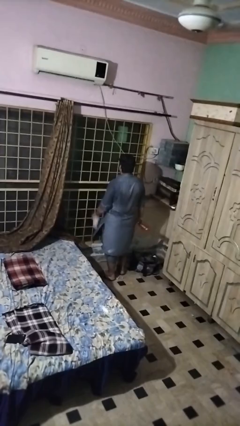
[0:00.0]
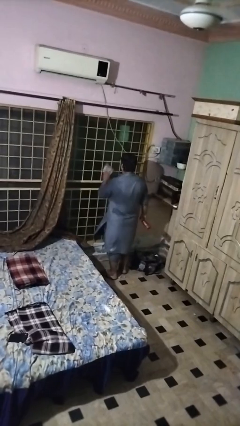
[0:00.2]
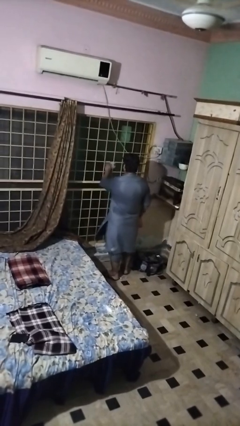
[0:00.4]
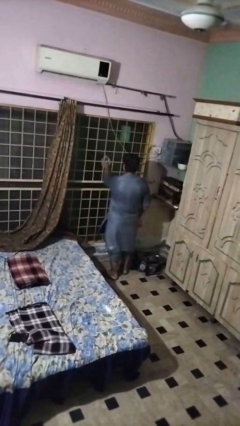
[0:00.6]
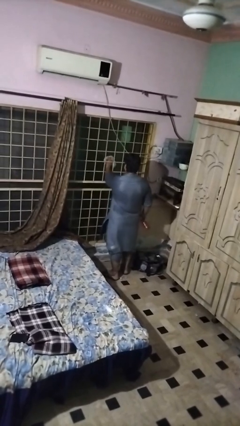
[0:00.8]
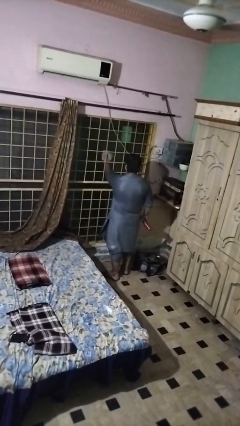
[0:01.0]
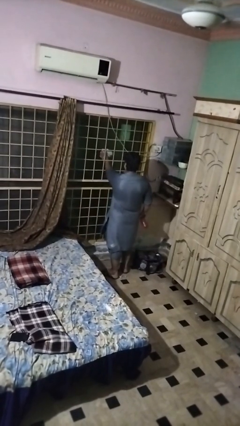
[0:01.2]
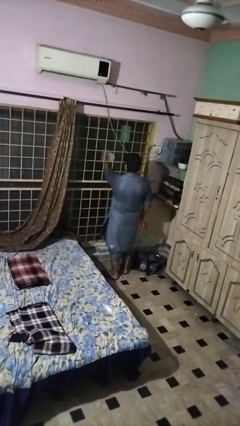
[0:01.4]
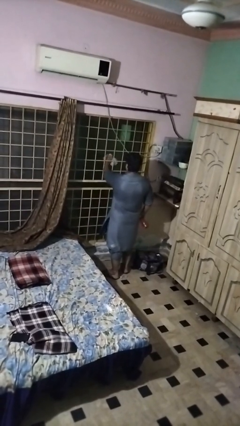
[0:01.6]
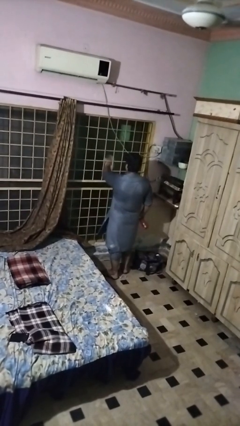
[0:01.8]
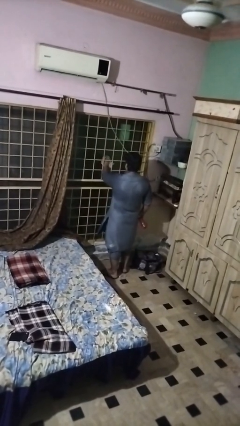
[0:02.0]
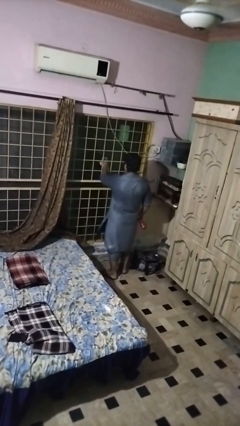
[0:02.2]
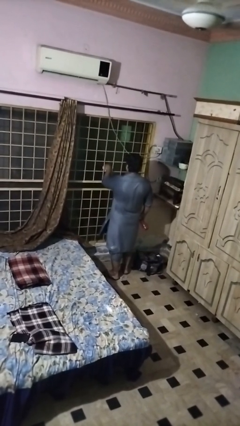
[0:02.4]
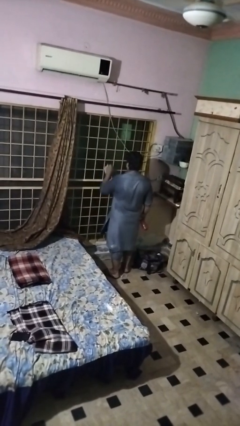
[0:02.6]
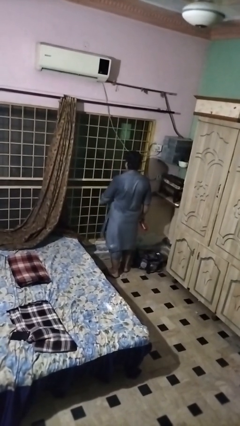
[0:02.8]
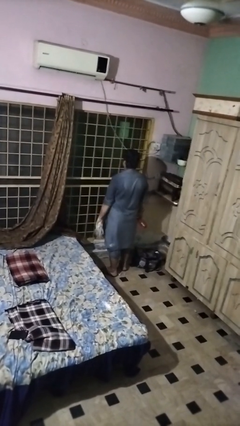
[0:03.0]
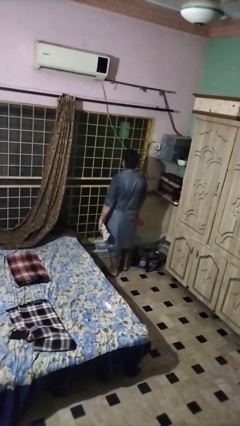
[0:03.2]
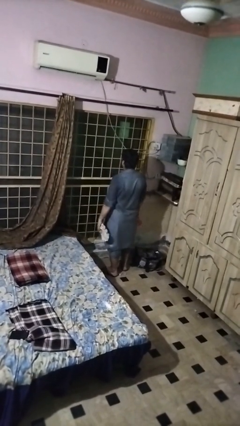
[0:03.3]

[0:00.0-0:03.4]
person washes window

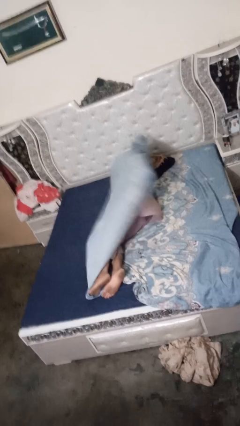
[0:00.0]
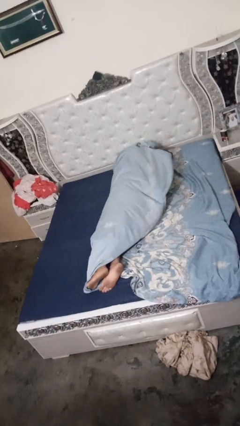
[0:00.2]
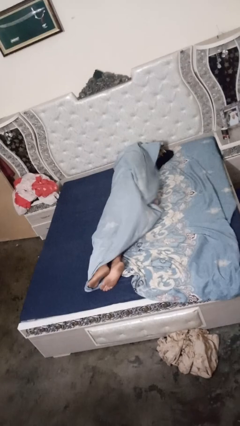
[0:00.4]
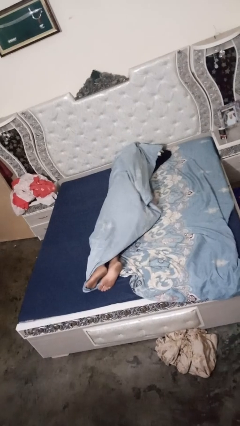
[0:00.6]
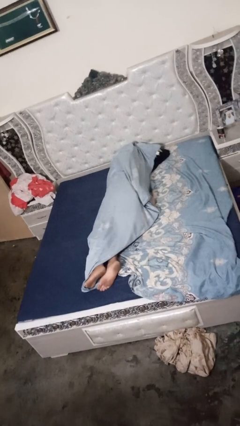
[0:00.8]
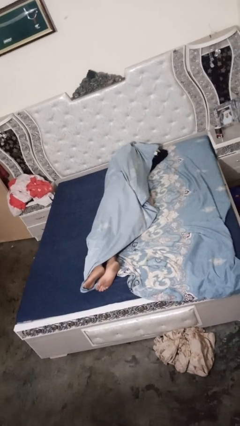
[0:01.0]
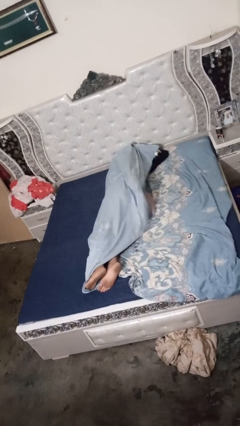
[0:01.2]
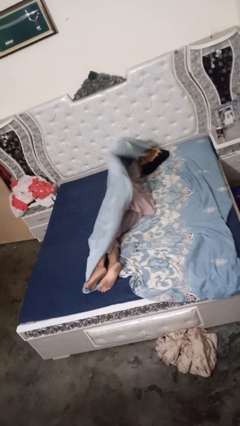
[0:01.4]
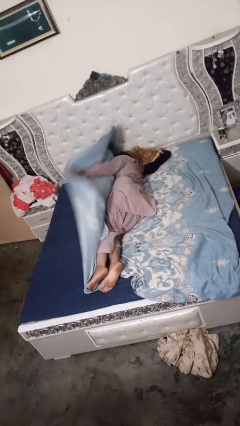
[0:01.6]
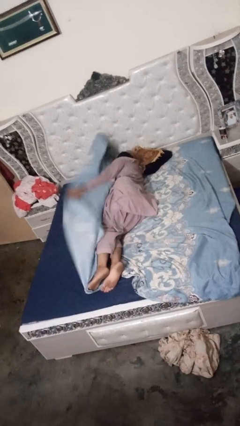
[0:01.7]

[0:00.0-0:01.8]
person covers with bedsheets

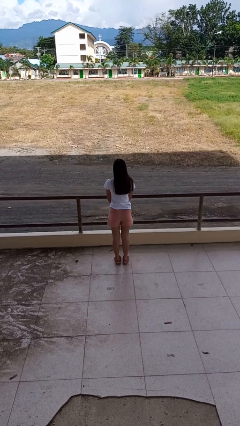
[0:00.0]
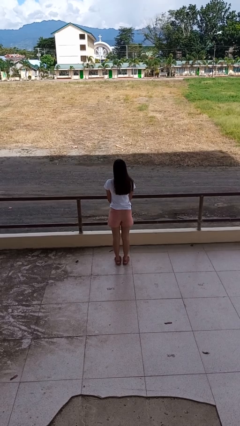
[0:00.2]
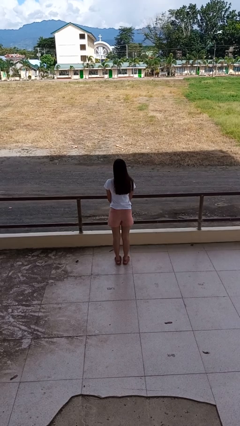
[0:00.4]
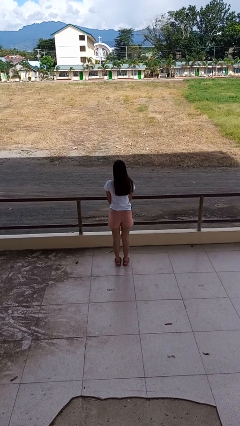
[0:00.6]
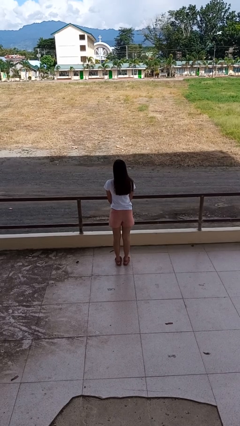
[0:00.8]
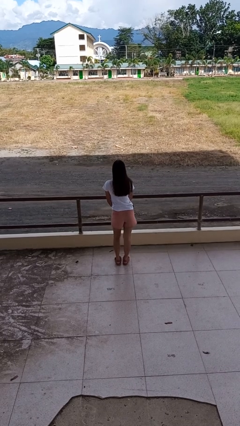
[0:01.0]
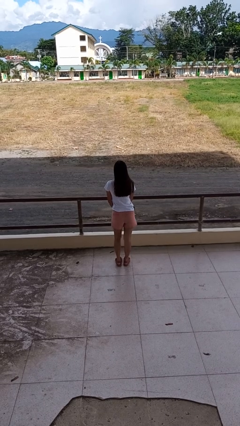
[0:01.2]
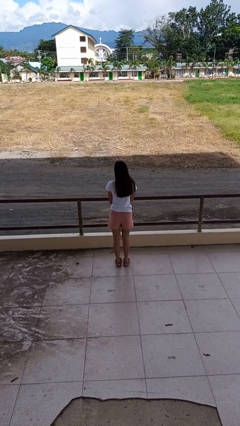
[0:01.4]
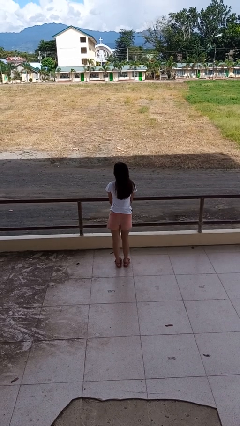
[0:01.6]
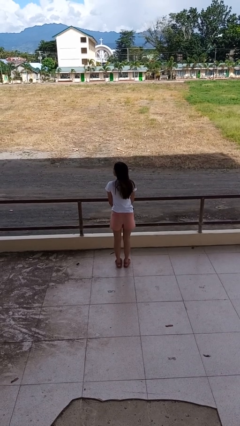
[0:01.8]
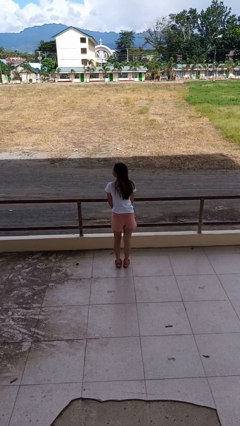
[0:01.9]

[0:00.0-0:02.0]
person wiggles hips

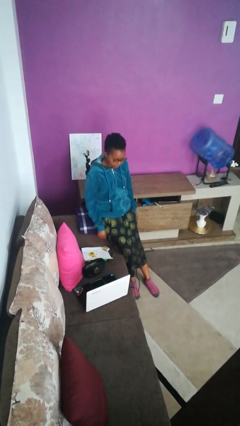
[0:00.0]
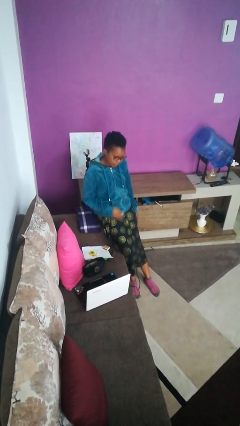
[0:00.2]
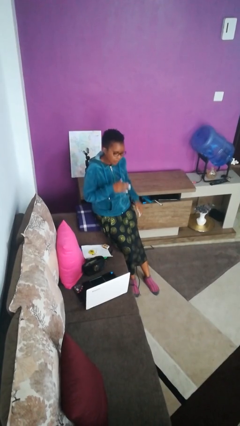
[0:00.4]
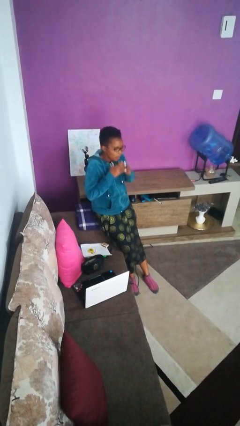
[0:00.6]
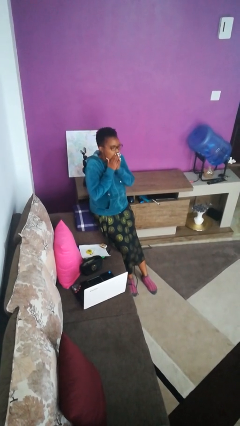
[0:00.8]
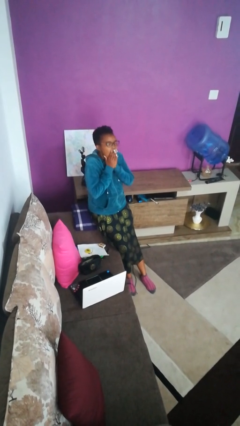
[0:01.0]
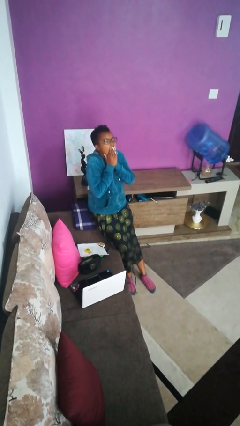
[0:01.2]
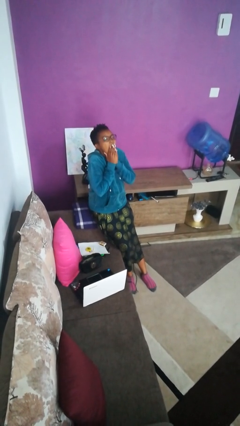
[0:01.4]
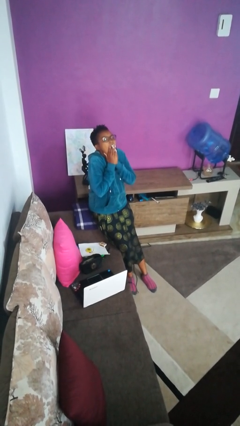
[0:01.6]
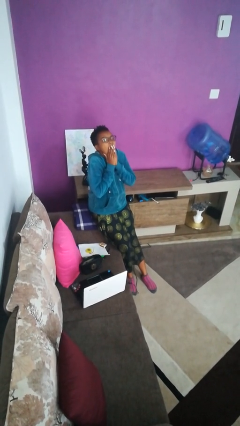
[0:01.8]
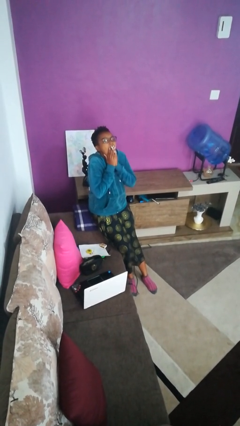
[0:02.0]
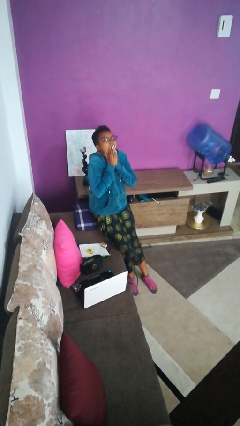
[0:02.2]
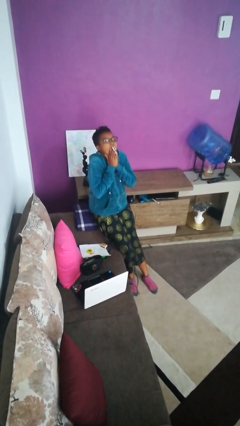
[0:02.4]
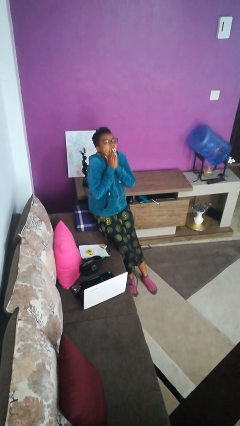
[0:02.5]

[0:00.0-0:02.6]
person yawns

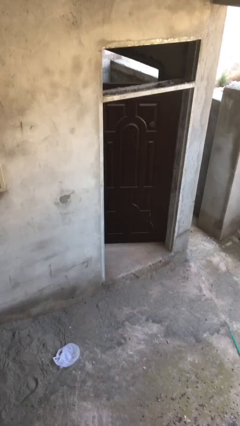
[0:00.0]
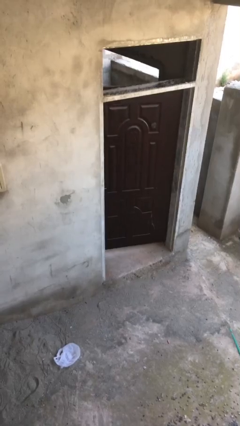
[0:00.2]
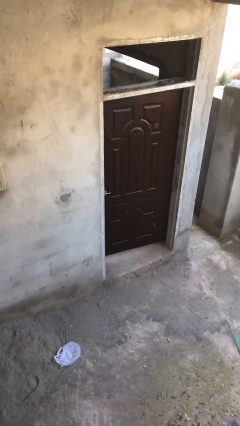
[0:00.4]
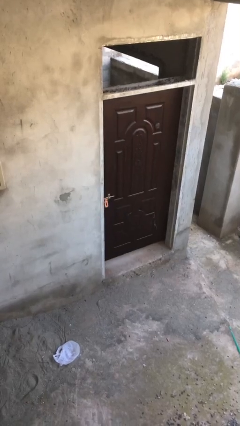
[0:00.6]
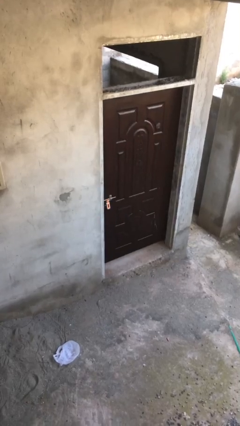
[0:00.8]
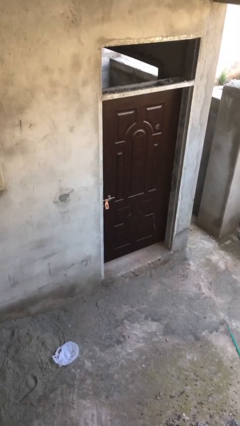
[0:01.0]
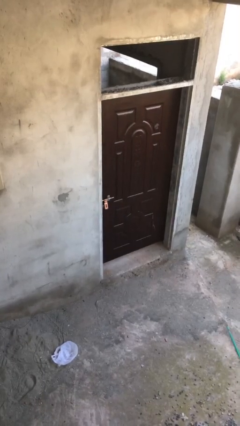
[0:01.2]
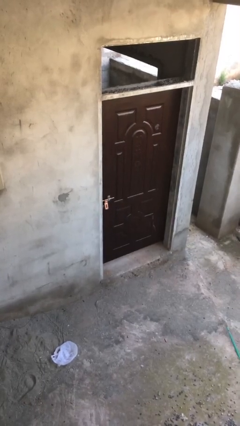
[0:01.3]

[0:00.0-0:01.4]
person closes facility door

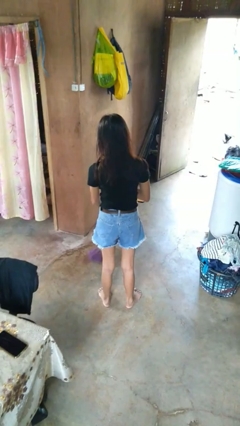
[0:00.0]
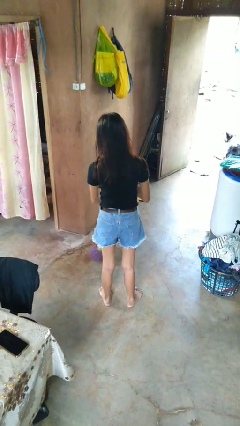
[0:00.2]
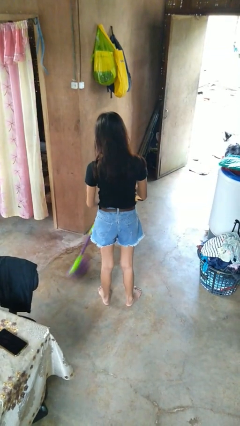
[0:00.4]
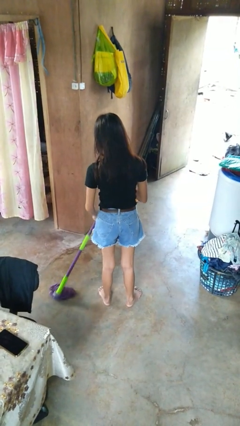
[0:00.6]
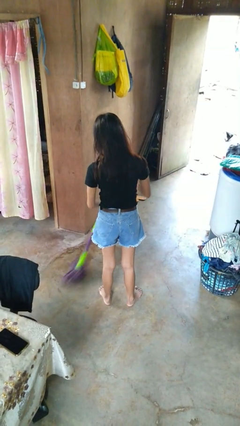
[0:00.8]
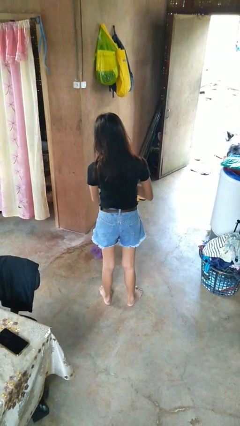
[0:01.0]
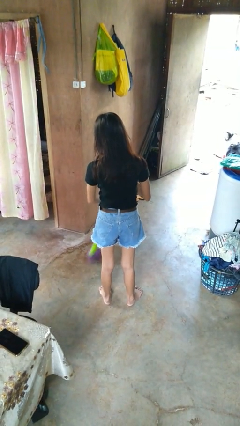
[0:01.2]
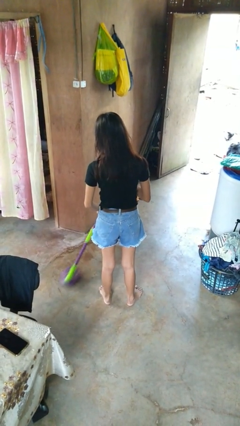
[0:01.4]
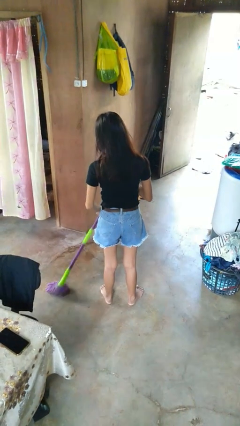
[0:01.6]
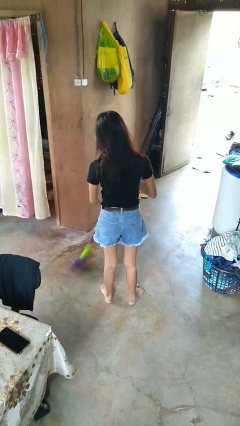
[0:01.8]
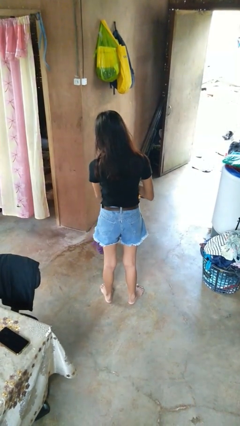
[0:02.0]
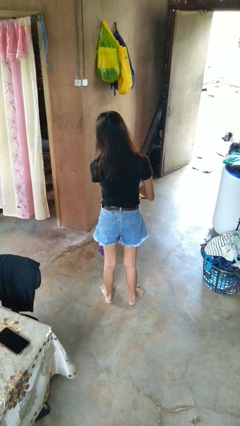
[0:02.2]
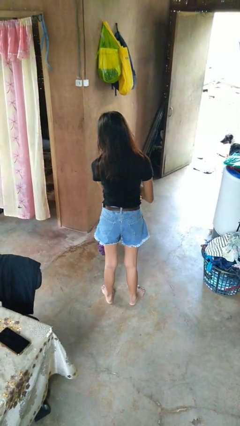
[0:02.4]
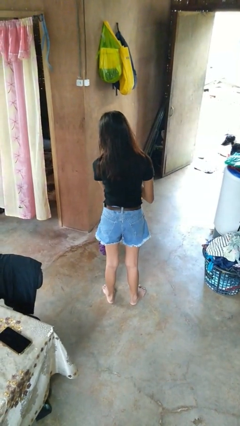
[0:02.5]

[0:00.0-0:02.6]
person mops

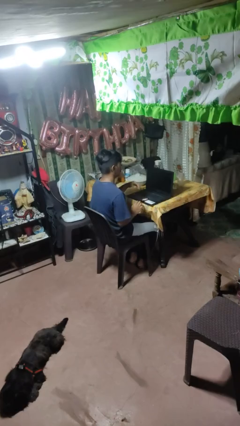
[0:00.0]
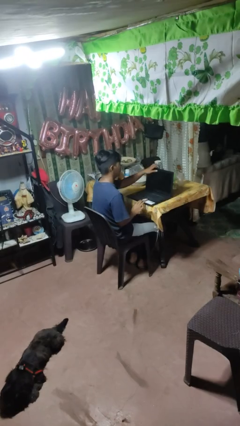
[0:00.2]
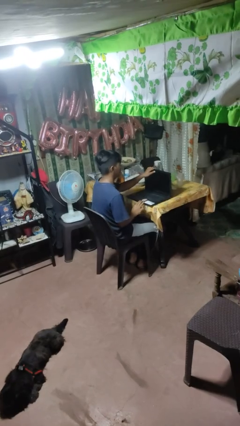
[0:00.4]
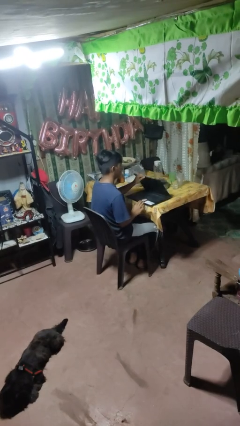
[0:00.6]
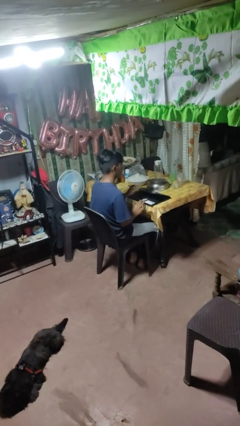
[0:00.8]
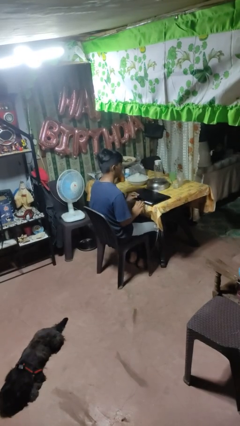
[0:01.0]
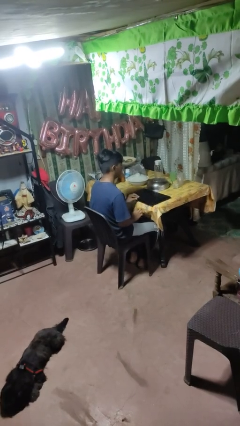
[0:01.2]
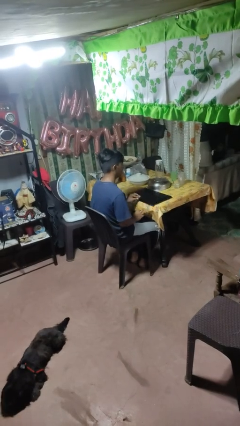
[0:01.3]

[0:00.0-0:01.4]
person closes laptop

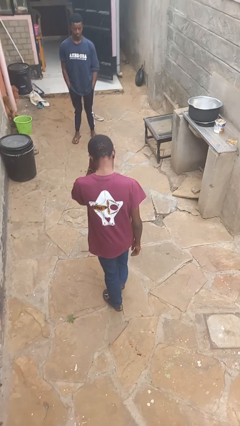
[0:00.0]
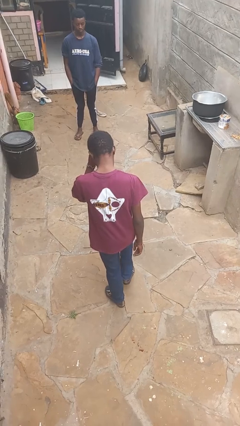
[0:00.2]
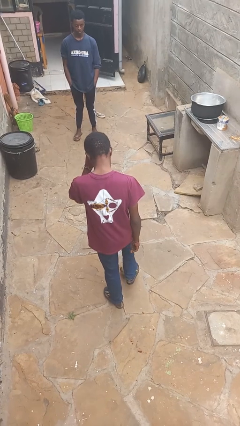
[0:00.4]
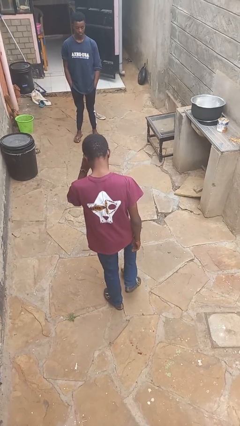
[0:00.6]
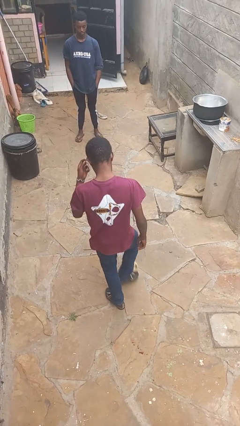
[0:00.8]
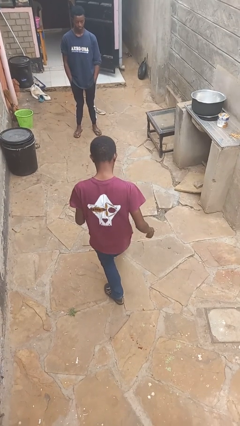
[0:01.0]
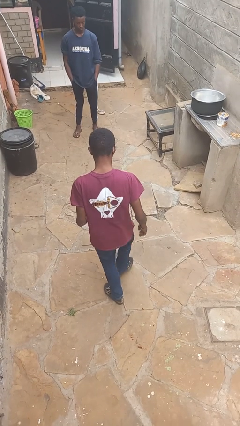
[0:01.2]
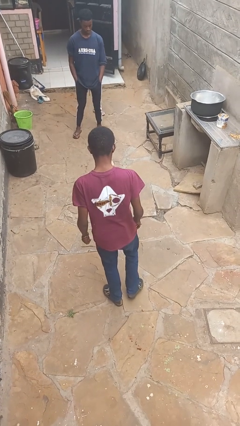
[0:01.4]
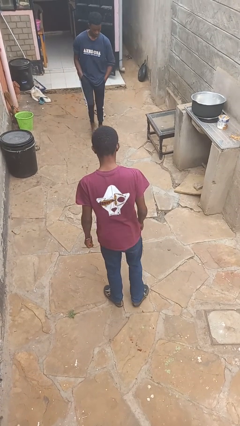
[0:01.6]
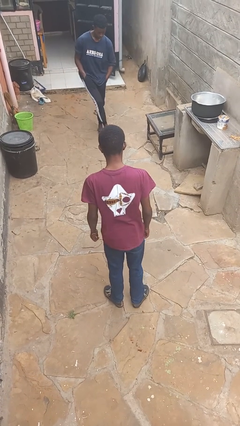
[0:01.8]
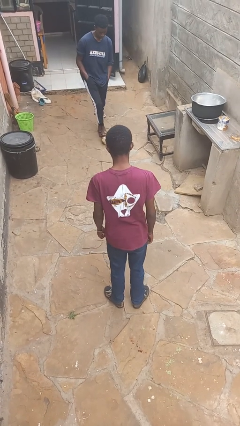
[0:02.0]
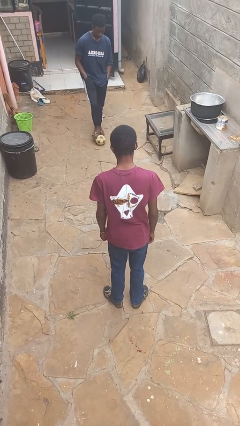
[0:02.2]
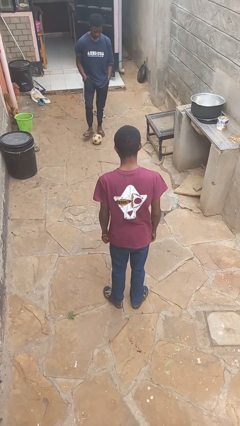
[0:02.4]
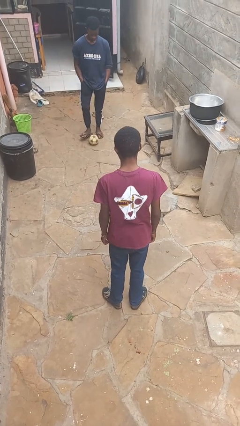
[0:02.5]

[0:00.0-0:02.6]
person kicks object to person
